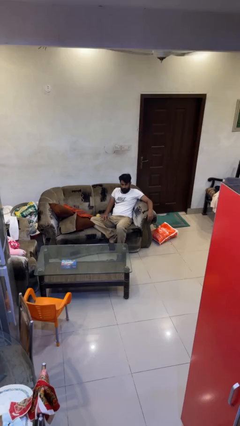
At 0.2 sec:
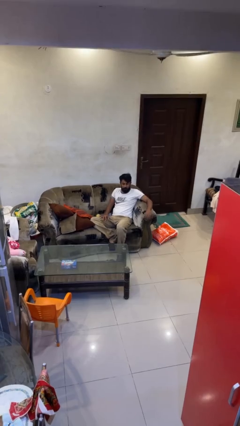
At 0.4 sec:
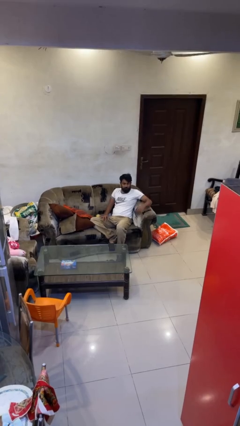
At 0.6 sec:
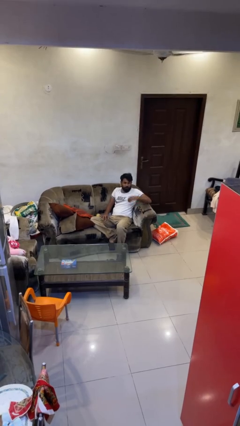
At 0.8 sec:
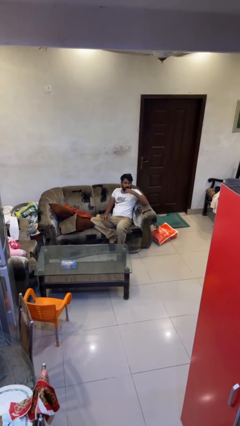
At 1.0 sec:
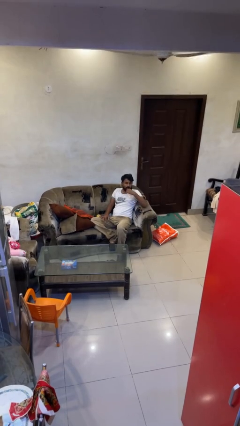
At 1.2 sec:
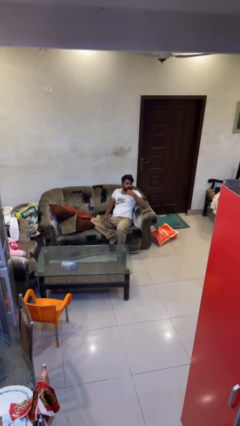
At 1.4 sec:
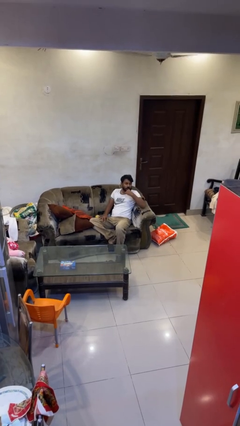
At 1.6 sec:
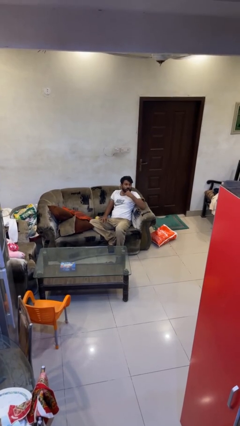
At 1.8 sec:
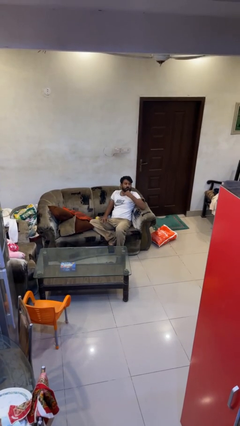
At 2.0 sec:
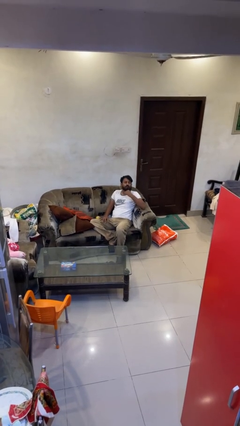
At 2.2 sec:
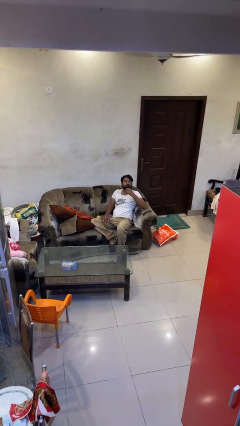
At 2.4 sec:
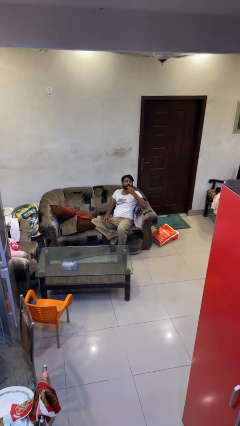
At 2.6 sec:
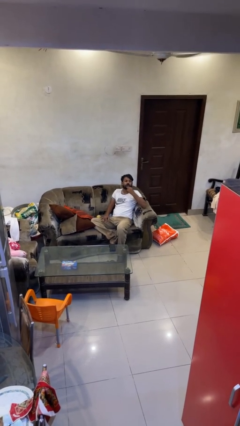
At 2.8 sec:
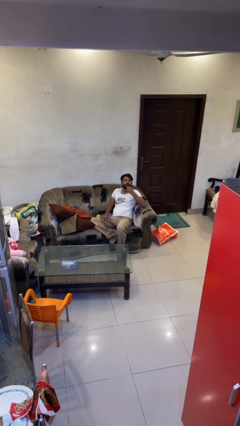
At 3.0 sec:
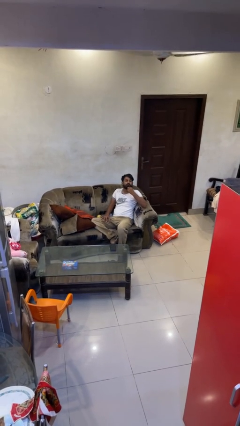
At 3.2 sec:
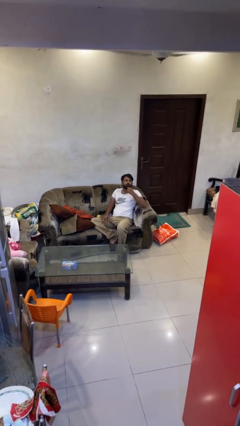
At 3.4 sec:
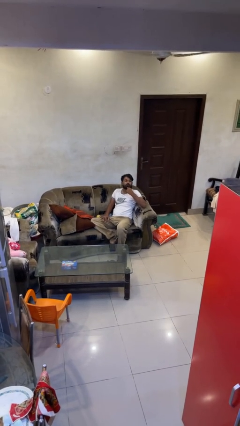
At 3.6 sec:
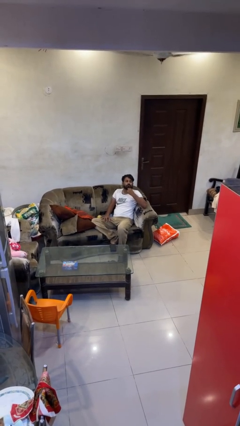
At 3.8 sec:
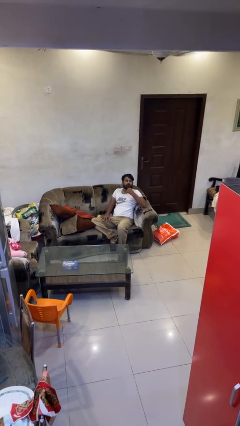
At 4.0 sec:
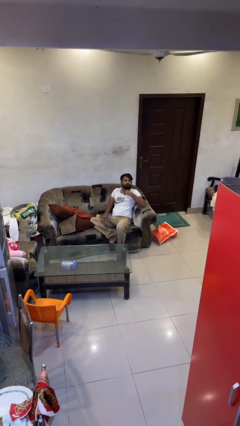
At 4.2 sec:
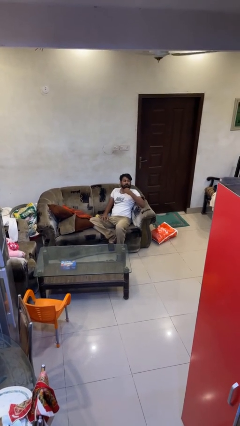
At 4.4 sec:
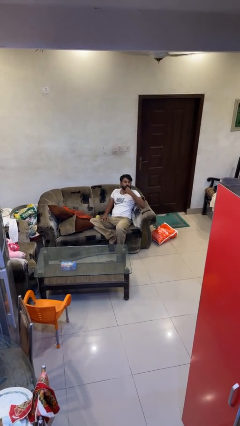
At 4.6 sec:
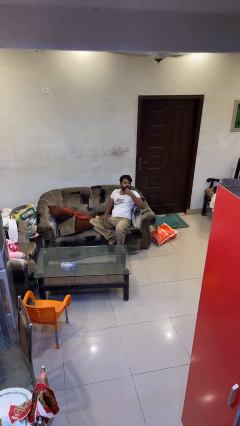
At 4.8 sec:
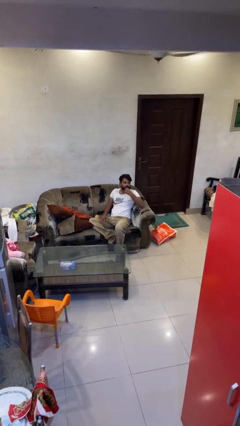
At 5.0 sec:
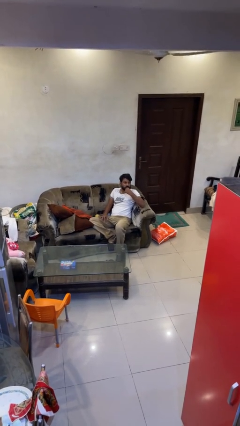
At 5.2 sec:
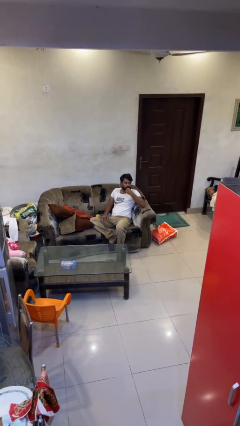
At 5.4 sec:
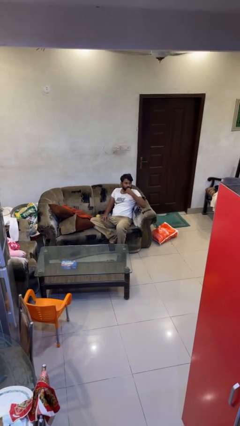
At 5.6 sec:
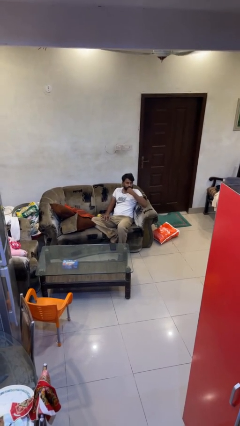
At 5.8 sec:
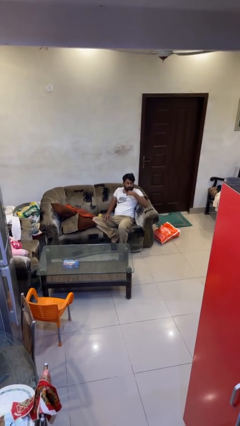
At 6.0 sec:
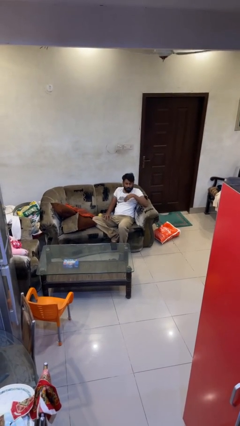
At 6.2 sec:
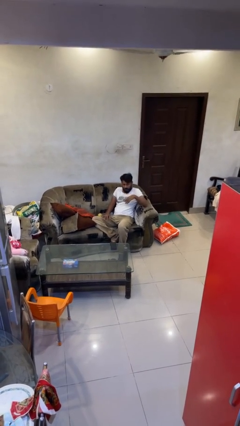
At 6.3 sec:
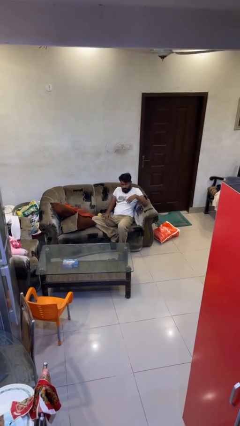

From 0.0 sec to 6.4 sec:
person strokes chin

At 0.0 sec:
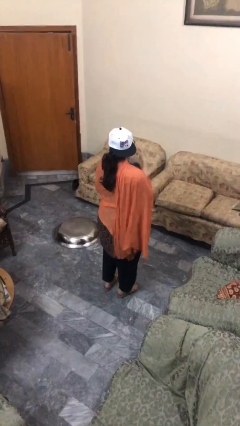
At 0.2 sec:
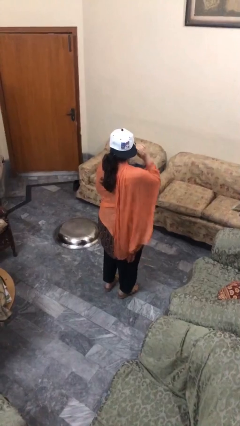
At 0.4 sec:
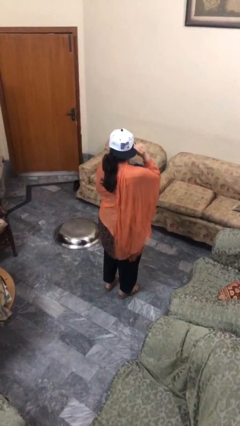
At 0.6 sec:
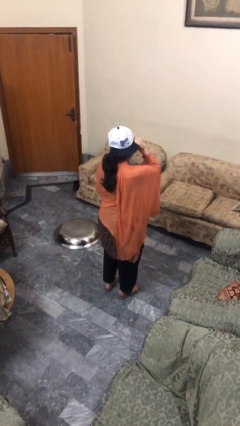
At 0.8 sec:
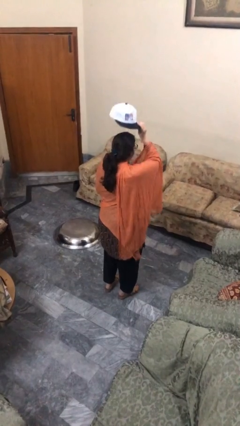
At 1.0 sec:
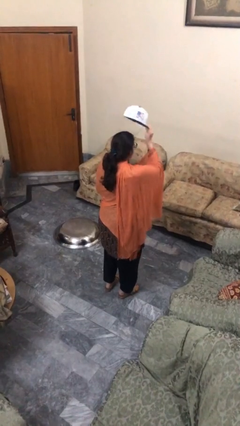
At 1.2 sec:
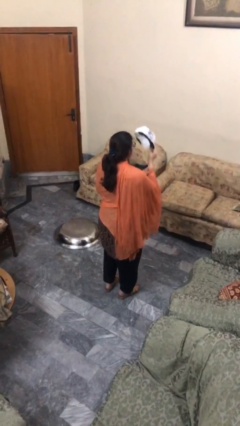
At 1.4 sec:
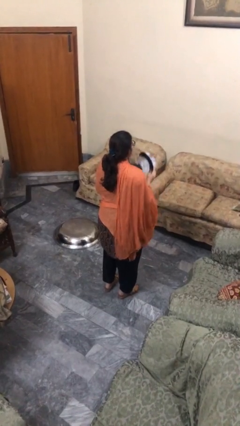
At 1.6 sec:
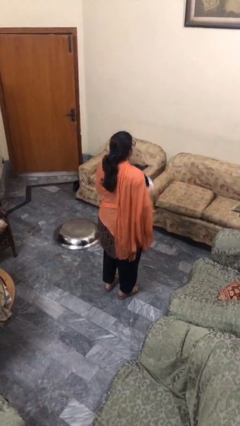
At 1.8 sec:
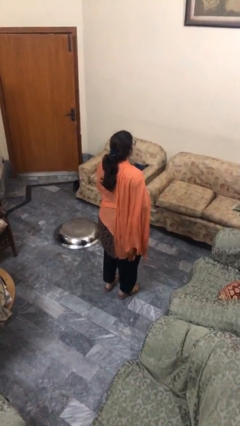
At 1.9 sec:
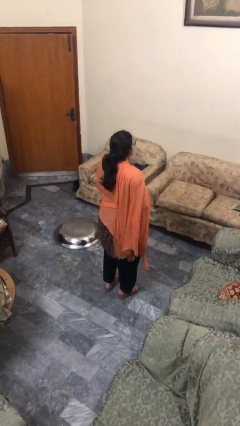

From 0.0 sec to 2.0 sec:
person takes off hat

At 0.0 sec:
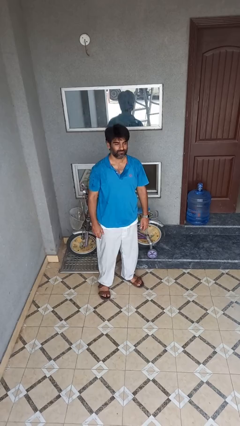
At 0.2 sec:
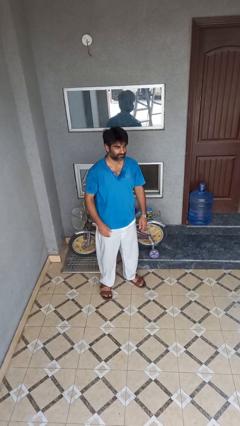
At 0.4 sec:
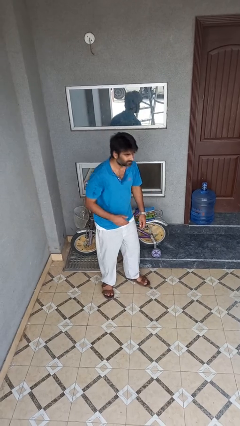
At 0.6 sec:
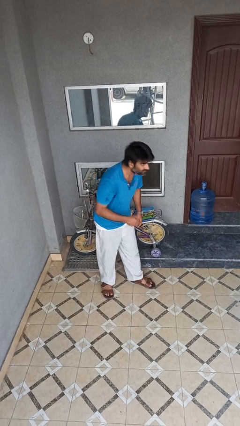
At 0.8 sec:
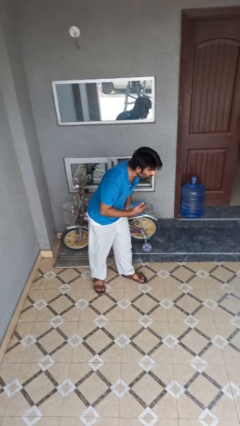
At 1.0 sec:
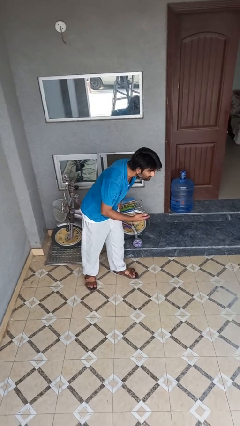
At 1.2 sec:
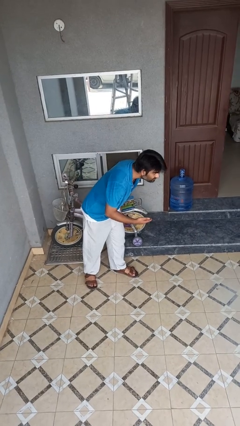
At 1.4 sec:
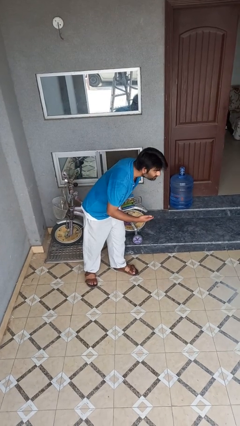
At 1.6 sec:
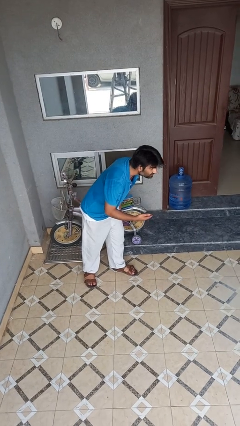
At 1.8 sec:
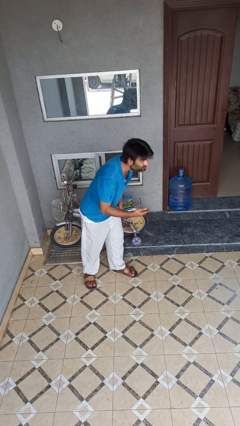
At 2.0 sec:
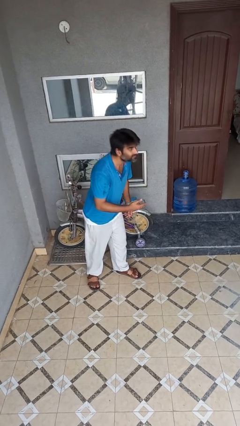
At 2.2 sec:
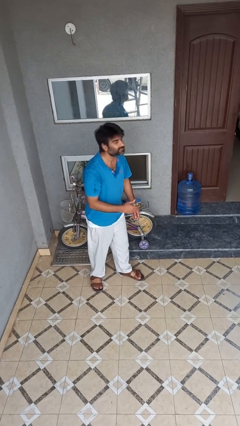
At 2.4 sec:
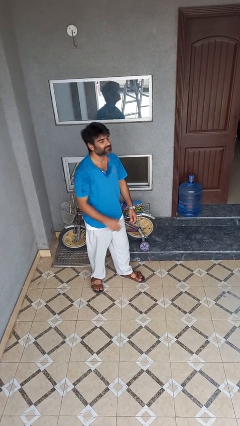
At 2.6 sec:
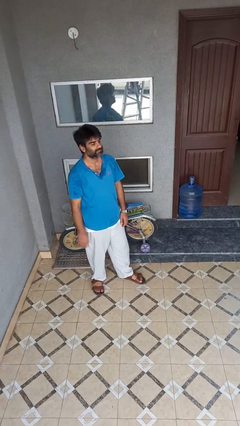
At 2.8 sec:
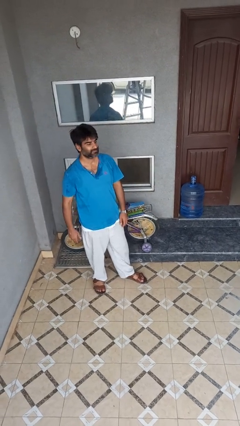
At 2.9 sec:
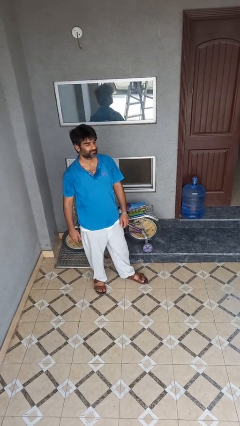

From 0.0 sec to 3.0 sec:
person bows

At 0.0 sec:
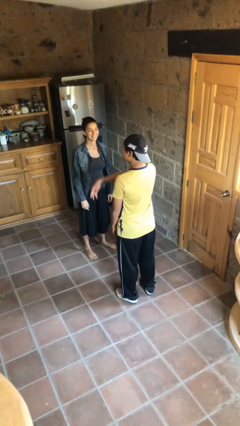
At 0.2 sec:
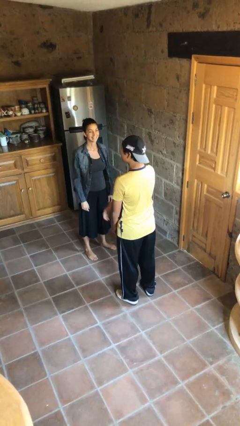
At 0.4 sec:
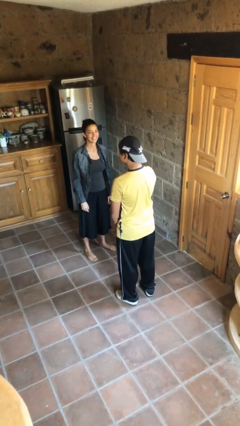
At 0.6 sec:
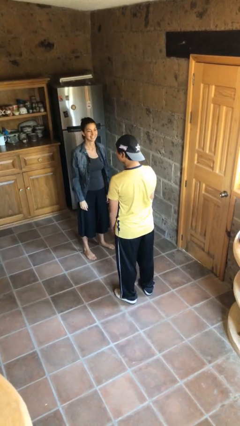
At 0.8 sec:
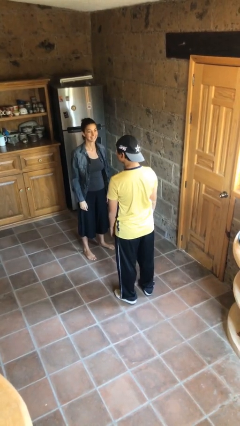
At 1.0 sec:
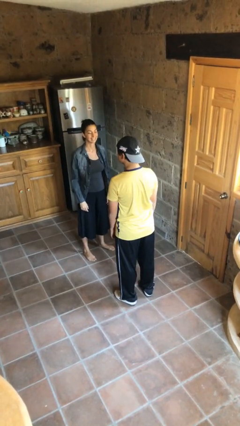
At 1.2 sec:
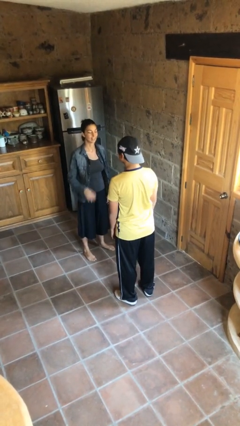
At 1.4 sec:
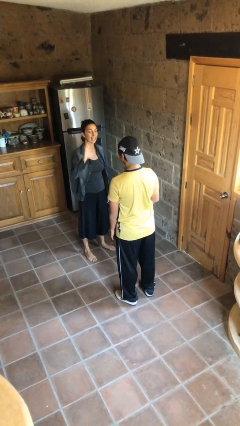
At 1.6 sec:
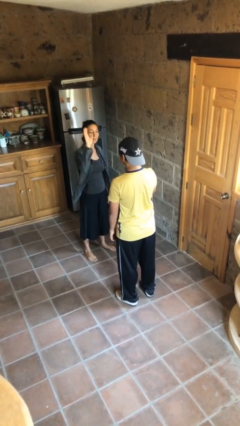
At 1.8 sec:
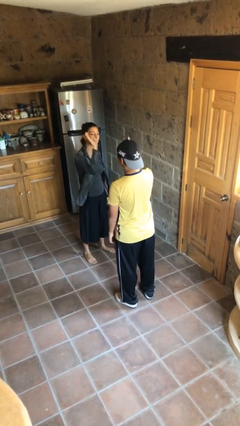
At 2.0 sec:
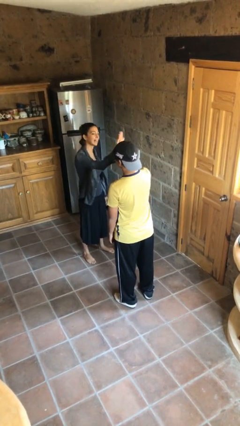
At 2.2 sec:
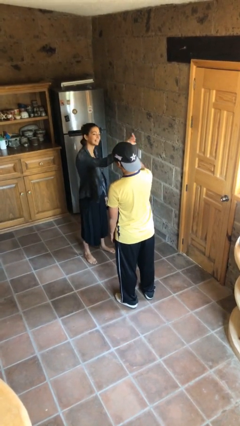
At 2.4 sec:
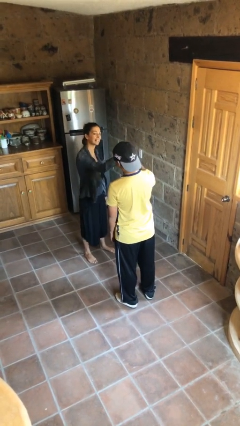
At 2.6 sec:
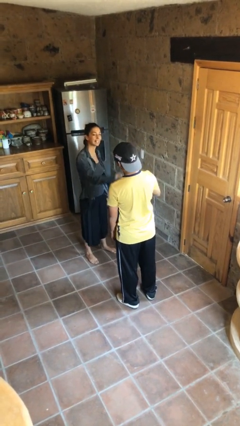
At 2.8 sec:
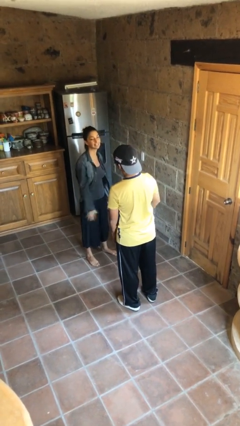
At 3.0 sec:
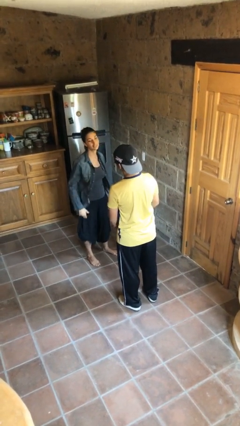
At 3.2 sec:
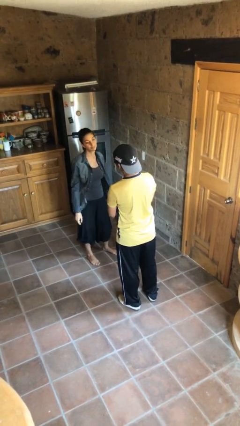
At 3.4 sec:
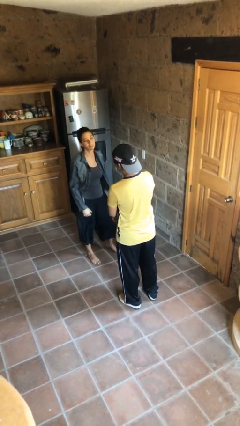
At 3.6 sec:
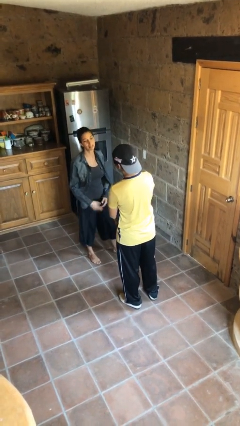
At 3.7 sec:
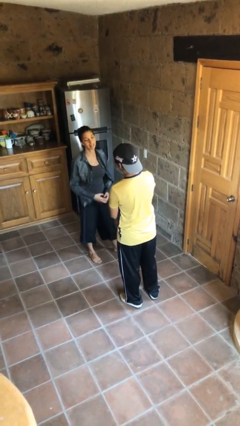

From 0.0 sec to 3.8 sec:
person highfives hand

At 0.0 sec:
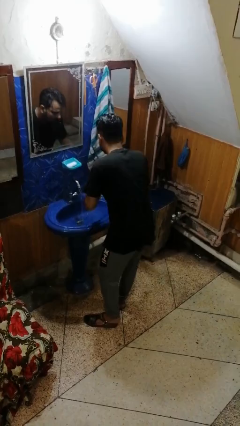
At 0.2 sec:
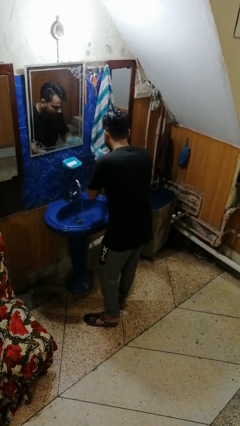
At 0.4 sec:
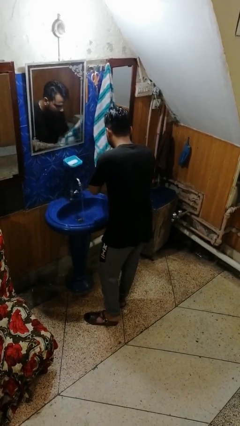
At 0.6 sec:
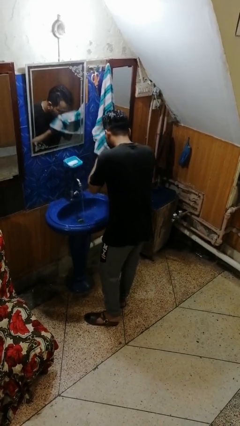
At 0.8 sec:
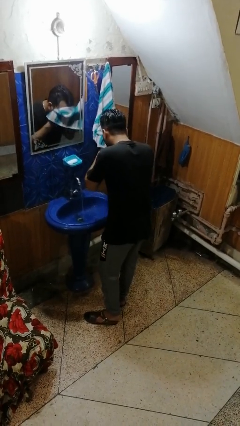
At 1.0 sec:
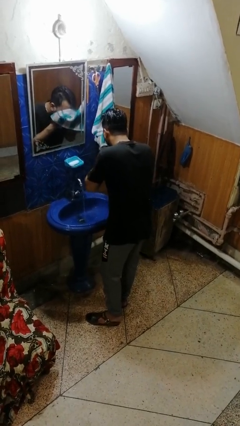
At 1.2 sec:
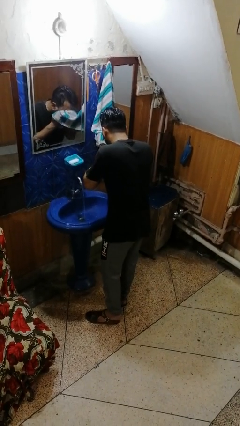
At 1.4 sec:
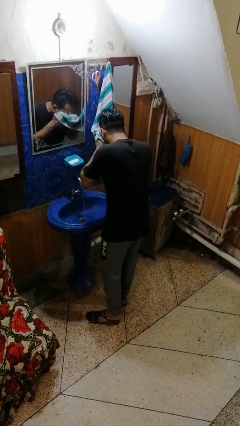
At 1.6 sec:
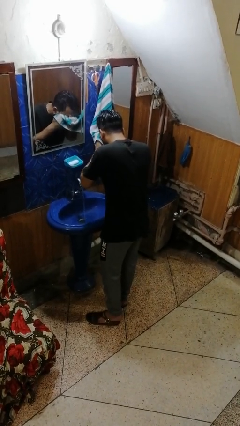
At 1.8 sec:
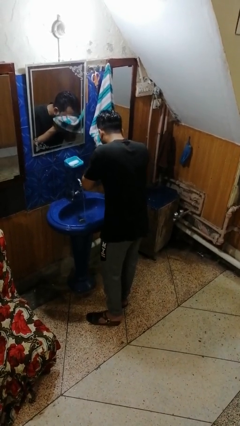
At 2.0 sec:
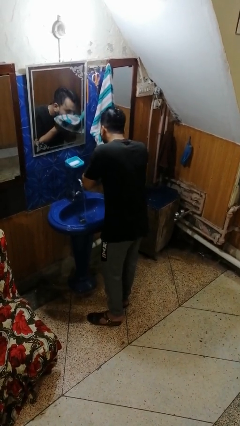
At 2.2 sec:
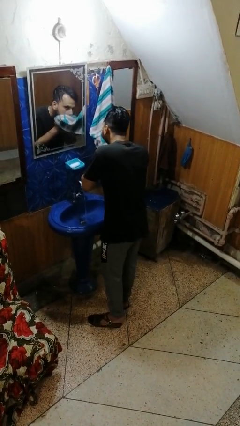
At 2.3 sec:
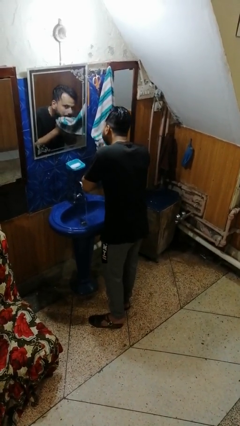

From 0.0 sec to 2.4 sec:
person dries face with towel
